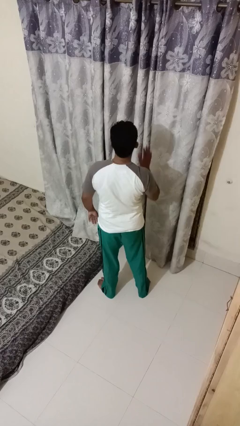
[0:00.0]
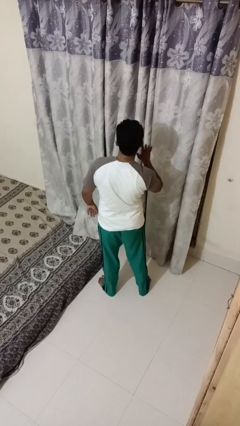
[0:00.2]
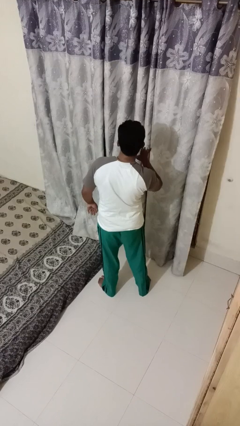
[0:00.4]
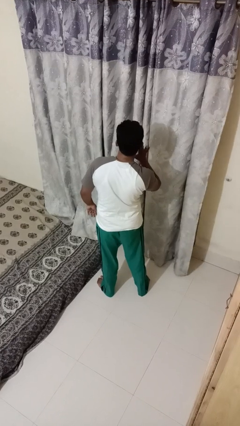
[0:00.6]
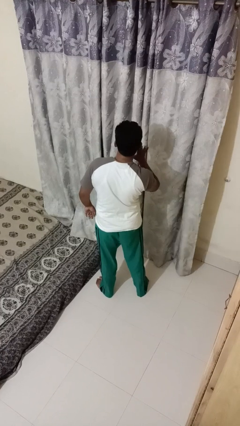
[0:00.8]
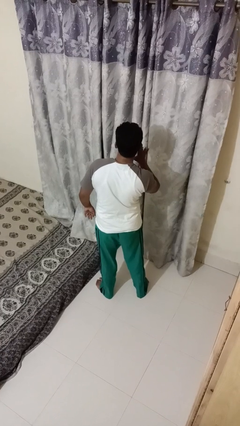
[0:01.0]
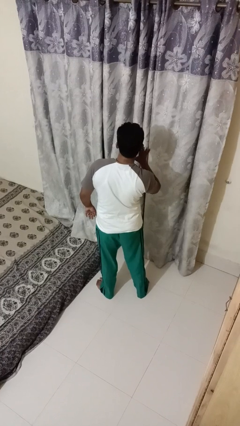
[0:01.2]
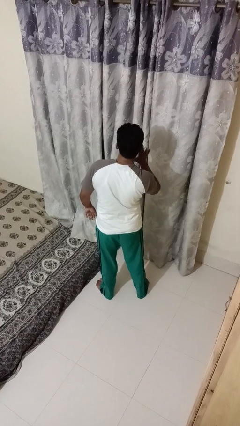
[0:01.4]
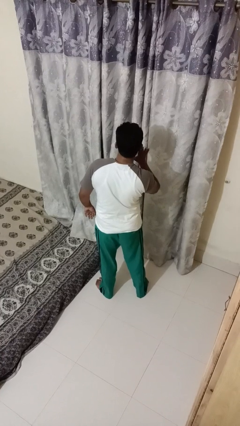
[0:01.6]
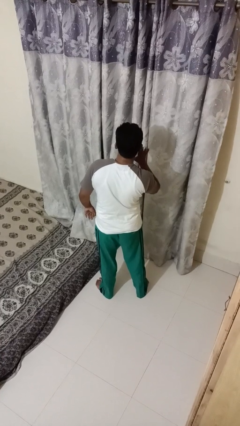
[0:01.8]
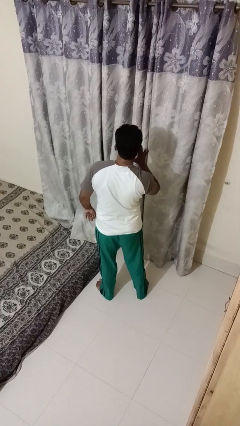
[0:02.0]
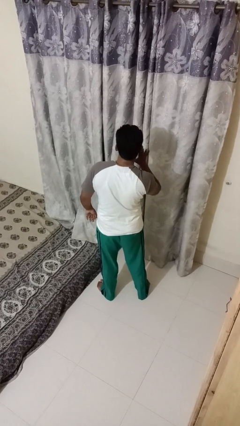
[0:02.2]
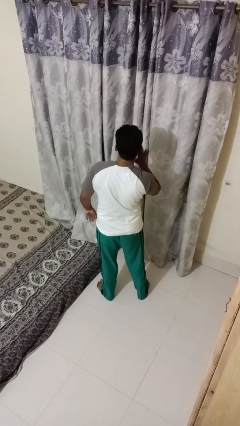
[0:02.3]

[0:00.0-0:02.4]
person gestures listen closely

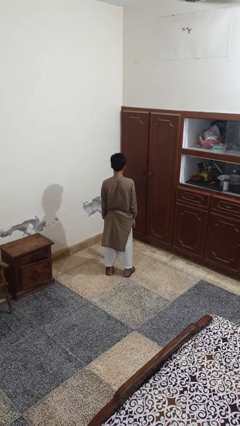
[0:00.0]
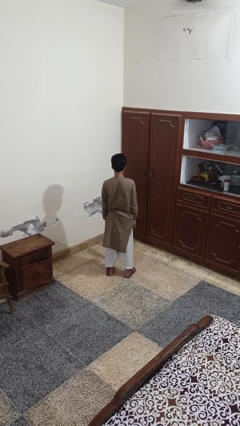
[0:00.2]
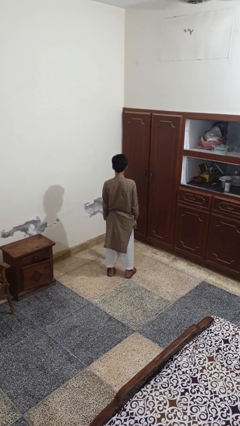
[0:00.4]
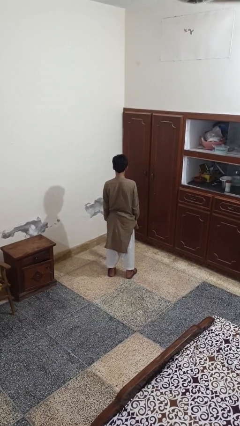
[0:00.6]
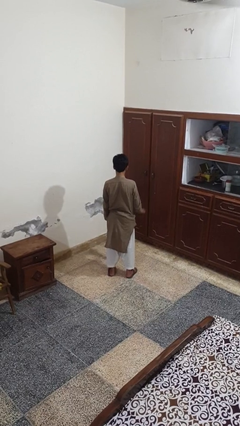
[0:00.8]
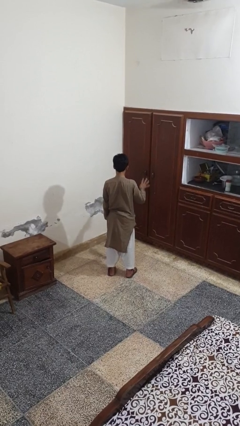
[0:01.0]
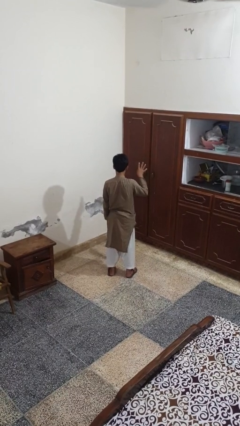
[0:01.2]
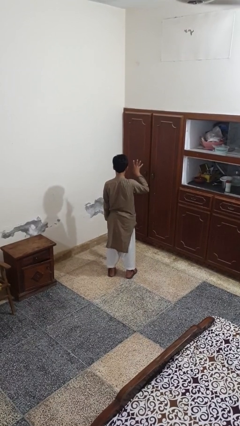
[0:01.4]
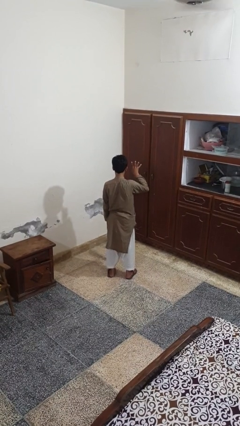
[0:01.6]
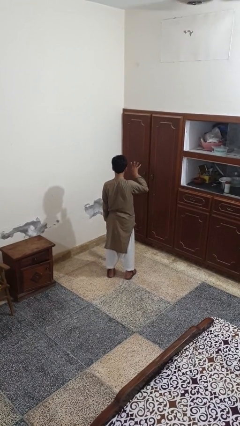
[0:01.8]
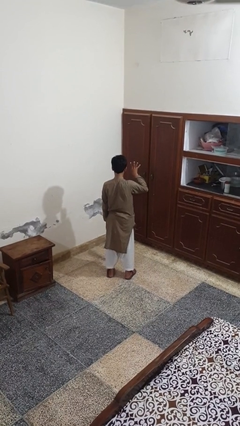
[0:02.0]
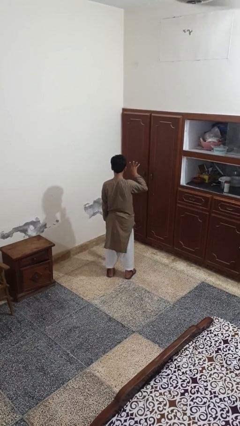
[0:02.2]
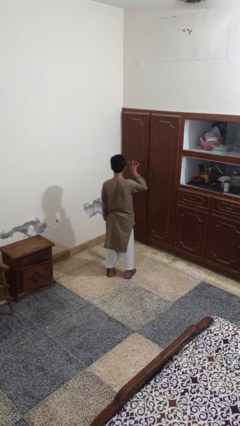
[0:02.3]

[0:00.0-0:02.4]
person gestures number four

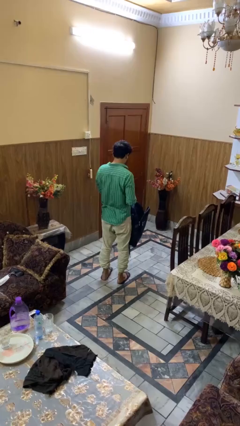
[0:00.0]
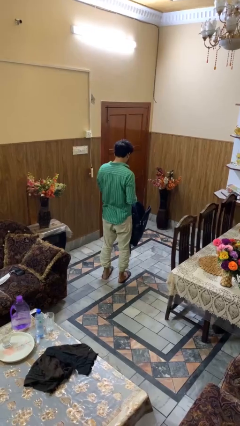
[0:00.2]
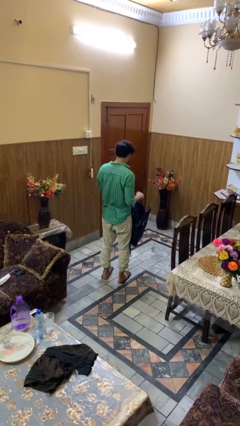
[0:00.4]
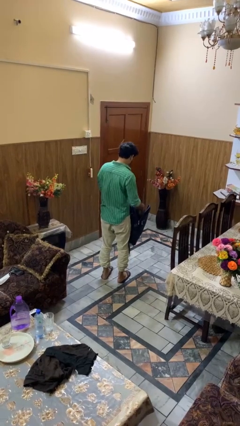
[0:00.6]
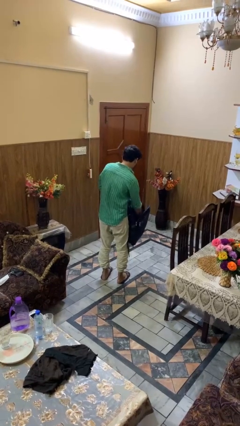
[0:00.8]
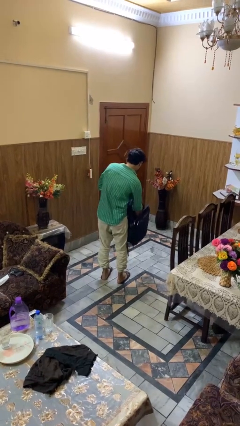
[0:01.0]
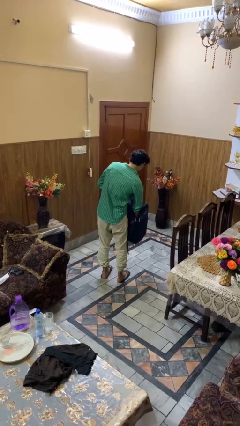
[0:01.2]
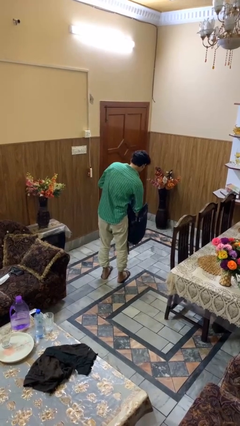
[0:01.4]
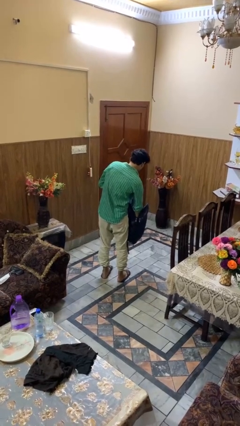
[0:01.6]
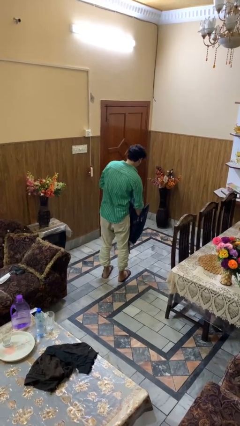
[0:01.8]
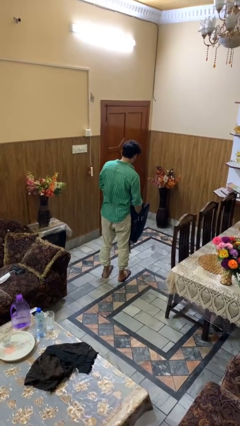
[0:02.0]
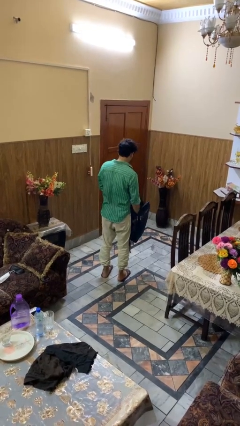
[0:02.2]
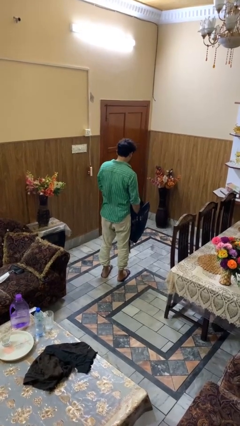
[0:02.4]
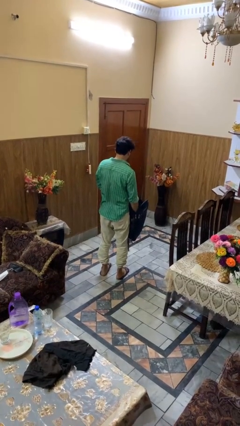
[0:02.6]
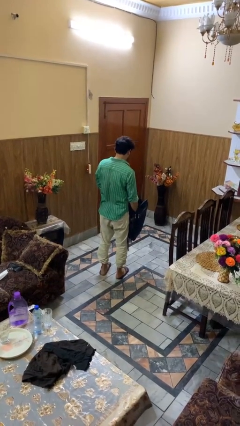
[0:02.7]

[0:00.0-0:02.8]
person searches in backpack

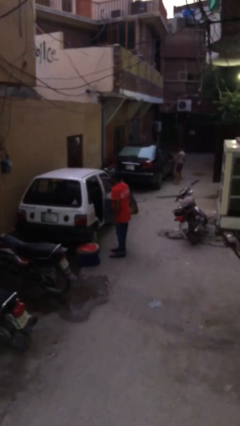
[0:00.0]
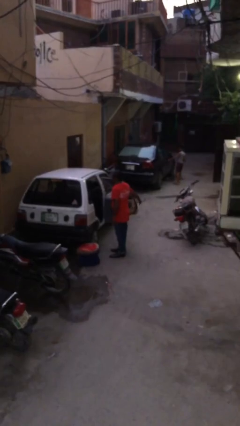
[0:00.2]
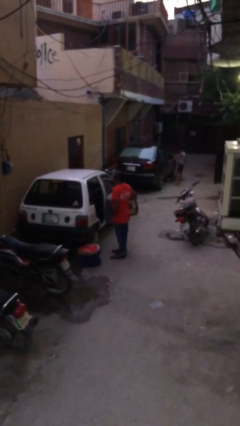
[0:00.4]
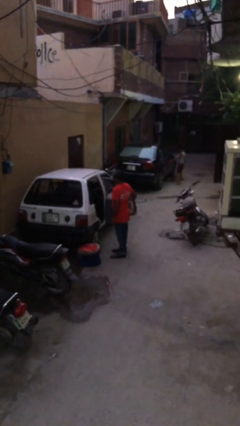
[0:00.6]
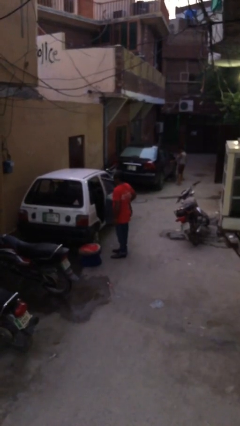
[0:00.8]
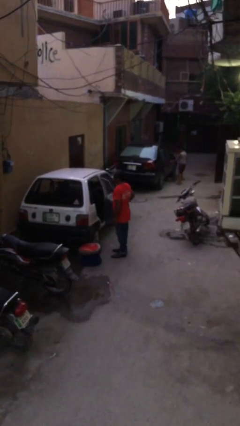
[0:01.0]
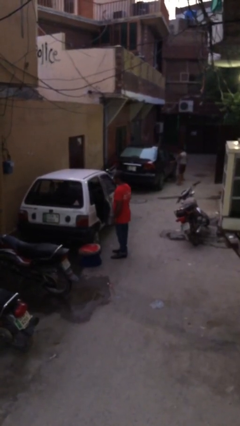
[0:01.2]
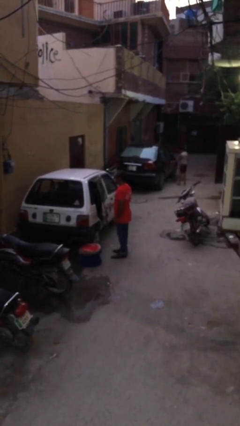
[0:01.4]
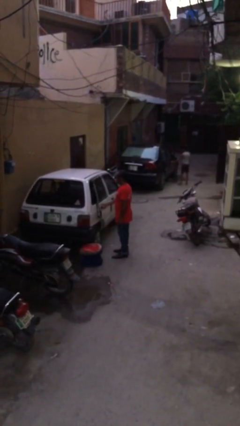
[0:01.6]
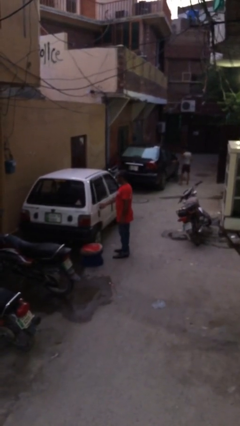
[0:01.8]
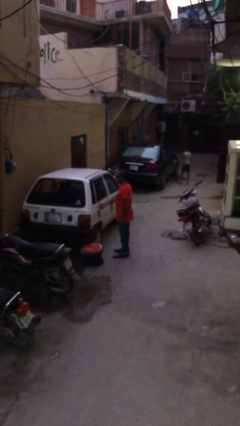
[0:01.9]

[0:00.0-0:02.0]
person closes car door

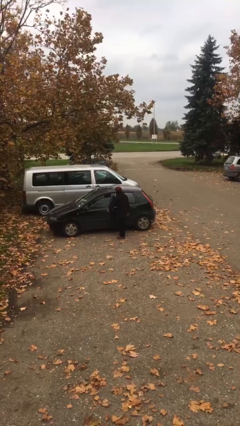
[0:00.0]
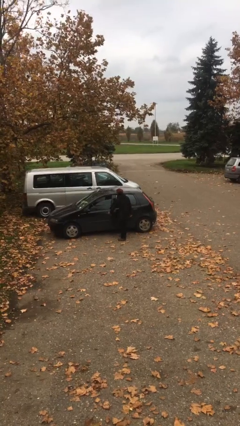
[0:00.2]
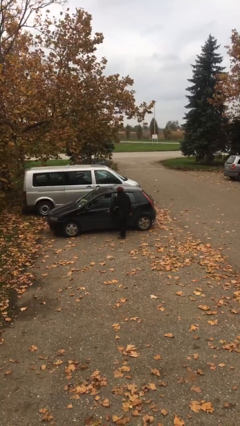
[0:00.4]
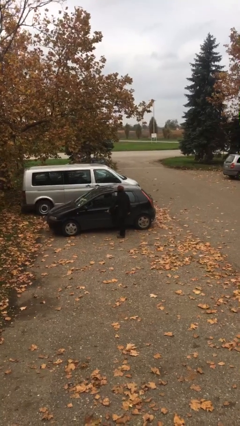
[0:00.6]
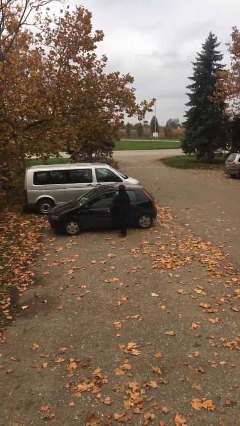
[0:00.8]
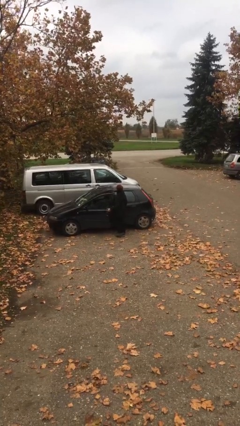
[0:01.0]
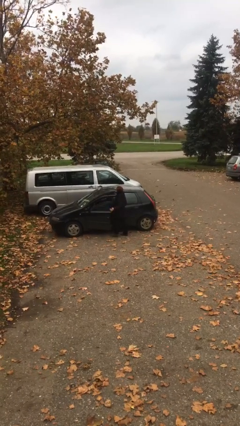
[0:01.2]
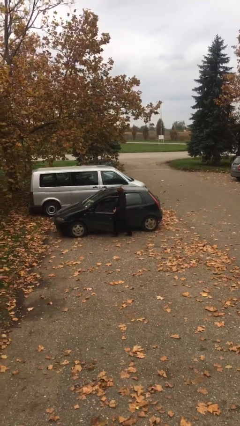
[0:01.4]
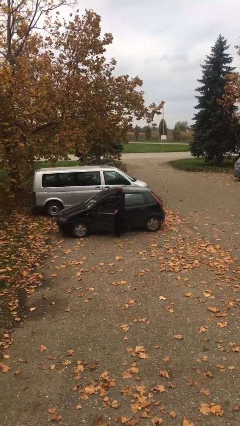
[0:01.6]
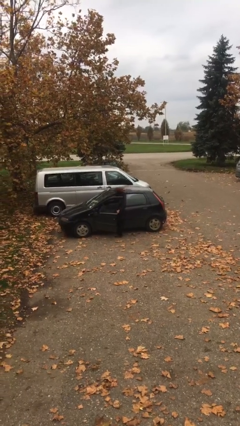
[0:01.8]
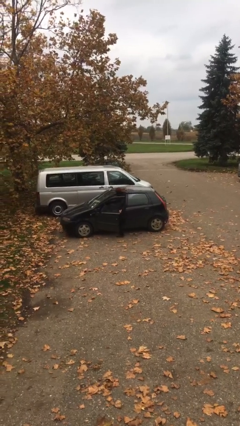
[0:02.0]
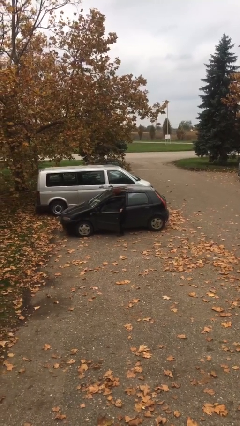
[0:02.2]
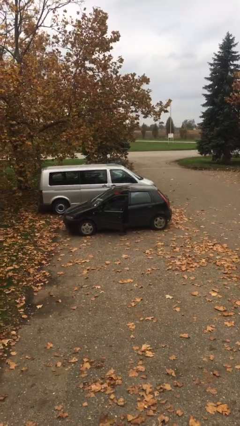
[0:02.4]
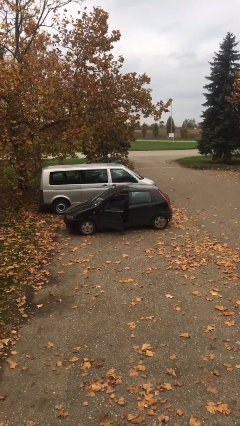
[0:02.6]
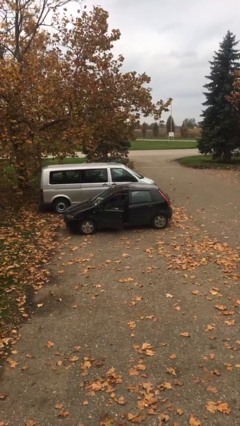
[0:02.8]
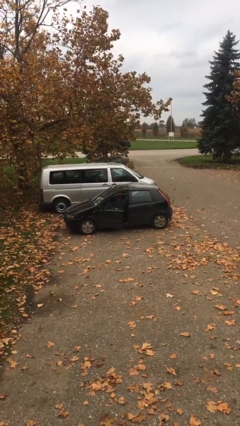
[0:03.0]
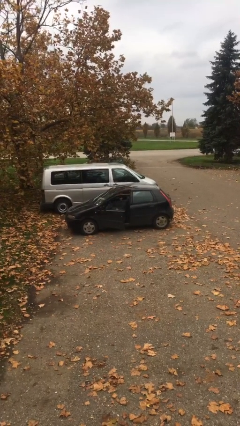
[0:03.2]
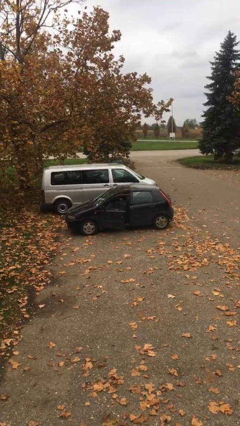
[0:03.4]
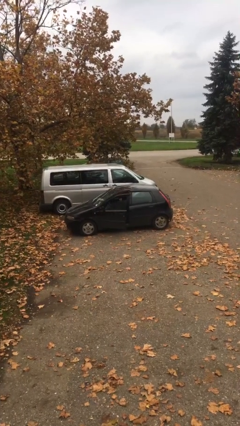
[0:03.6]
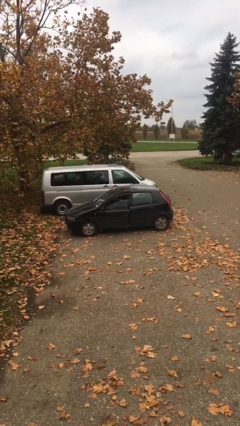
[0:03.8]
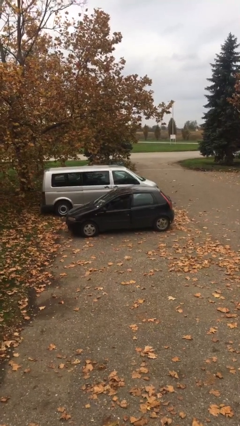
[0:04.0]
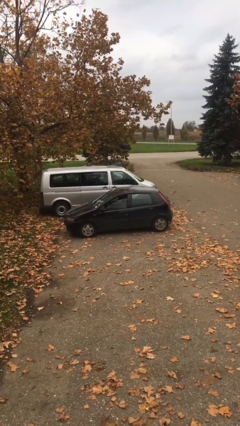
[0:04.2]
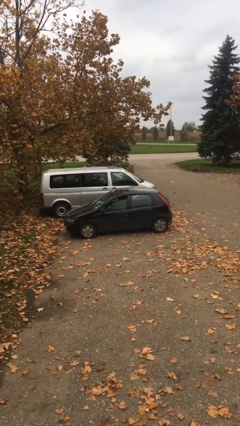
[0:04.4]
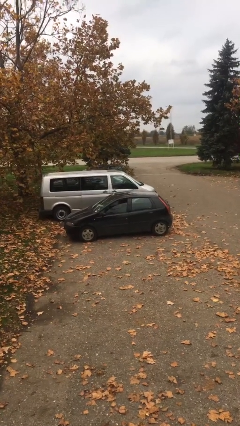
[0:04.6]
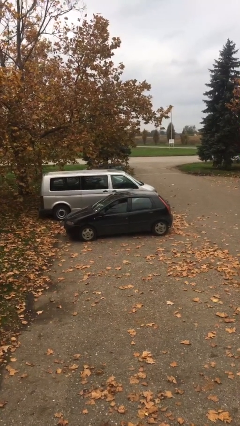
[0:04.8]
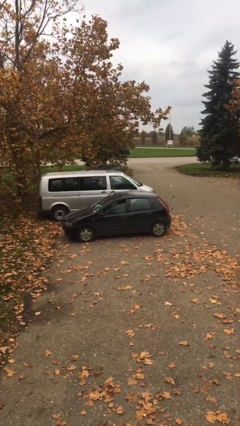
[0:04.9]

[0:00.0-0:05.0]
person enters car

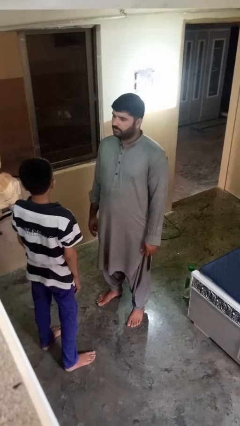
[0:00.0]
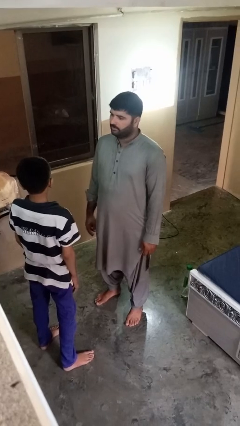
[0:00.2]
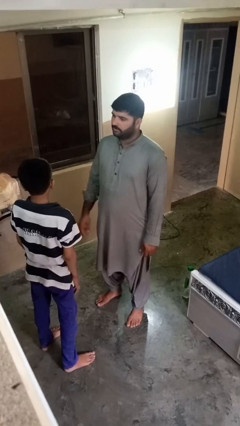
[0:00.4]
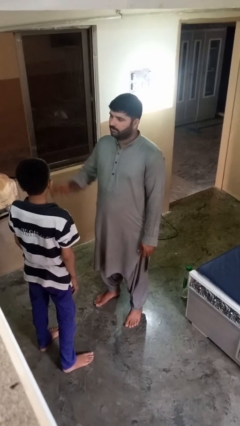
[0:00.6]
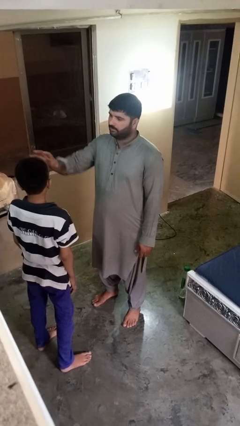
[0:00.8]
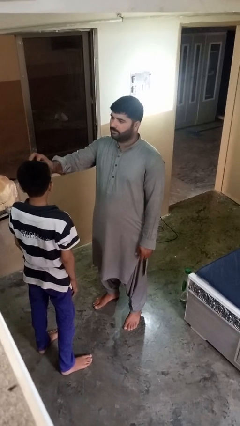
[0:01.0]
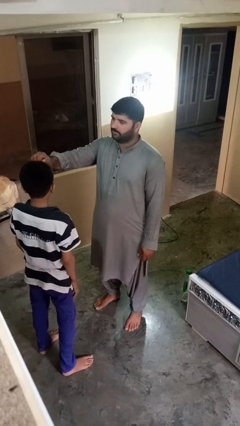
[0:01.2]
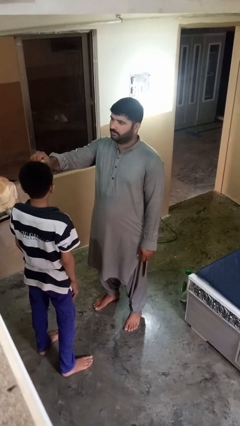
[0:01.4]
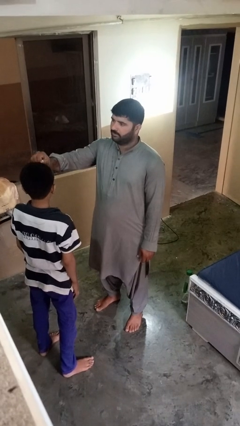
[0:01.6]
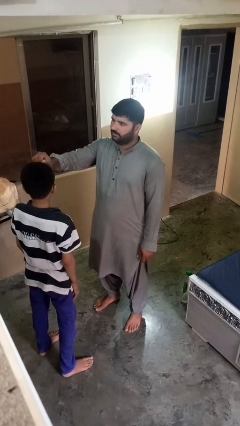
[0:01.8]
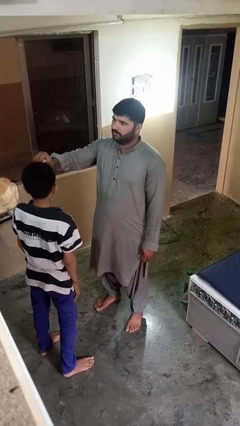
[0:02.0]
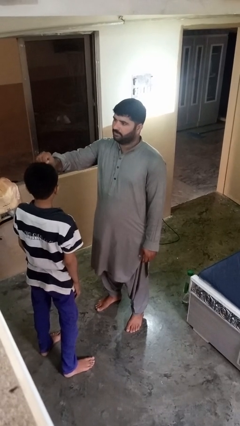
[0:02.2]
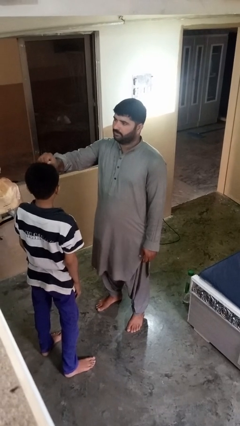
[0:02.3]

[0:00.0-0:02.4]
person braids hair of person

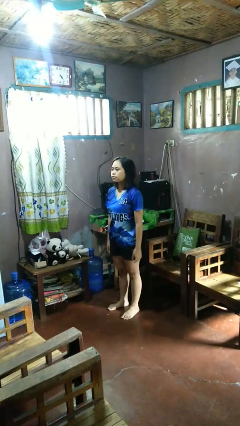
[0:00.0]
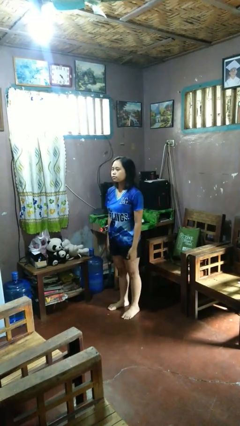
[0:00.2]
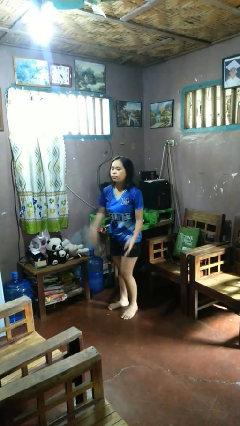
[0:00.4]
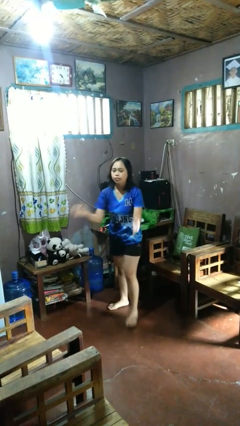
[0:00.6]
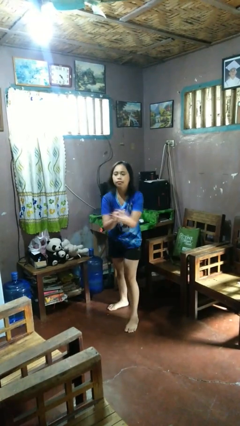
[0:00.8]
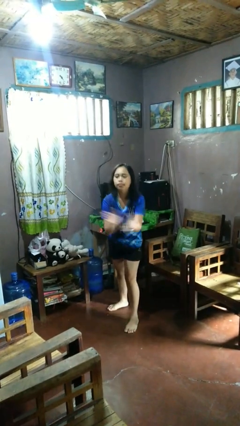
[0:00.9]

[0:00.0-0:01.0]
person claps hands
